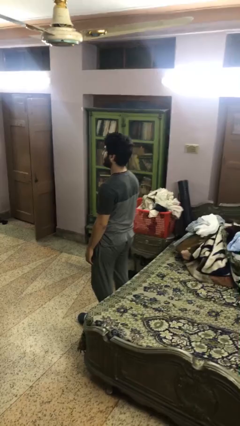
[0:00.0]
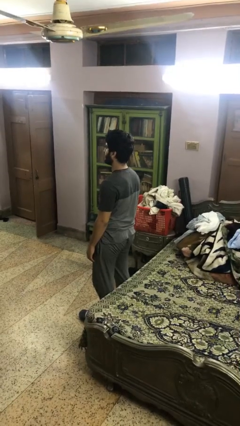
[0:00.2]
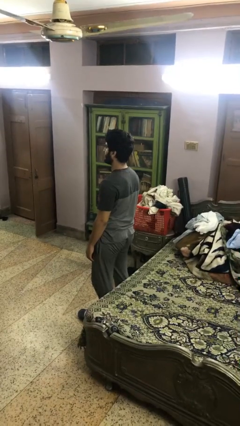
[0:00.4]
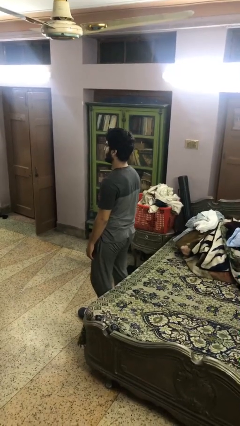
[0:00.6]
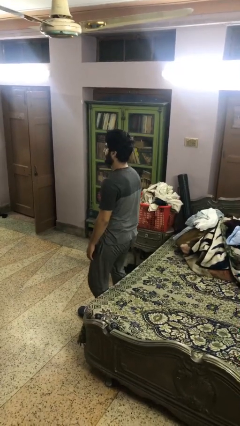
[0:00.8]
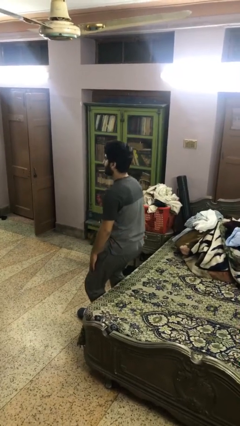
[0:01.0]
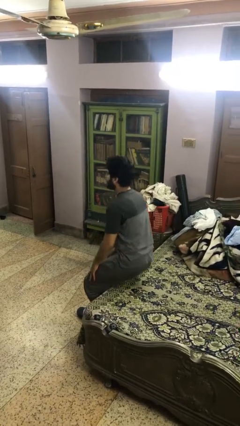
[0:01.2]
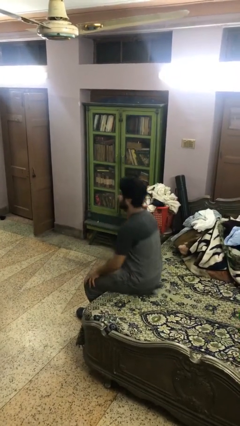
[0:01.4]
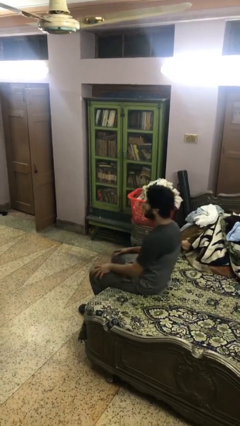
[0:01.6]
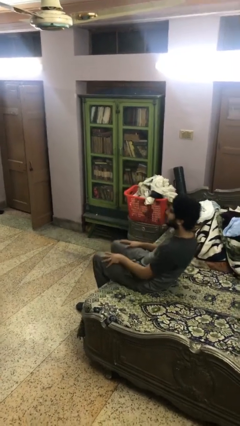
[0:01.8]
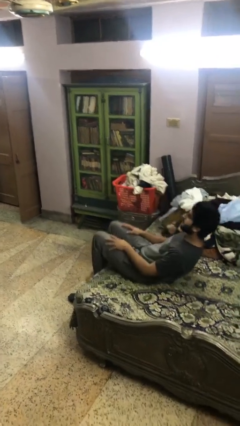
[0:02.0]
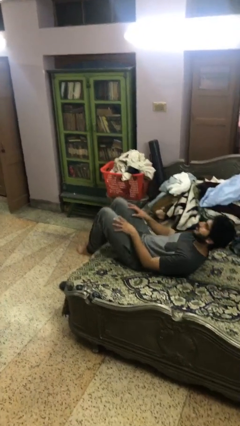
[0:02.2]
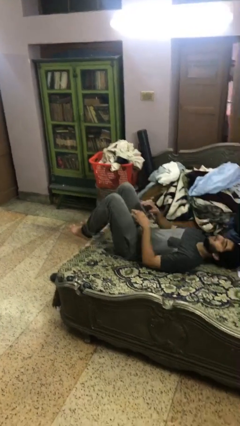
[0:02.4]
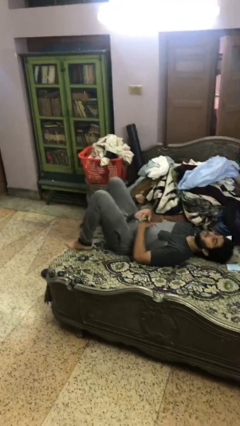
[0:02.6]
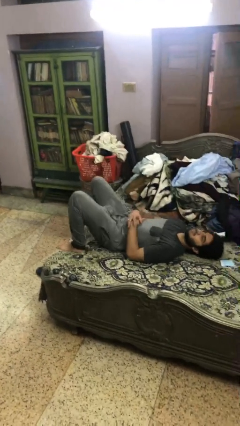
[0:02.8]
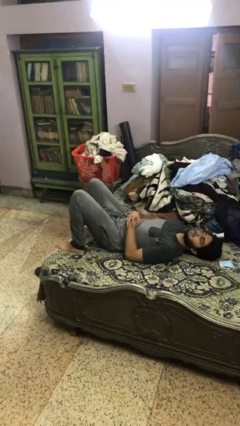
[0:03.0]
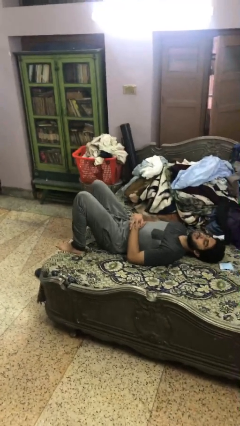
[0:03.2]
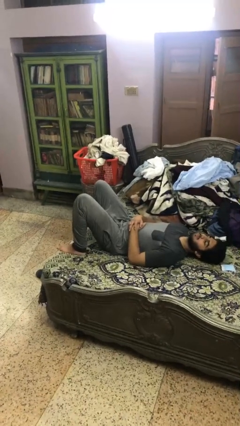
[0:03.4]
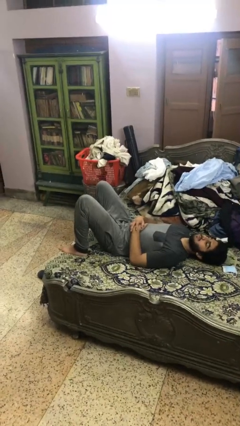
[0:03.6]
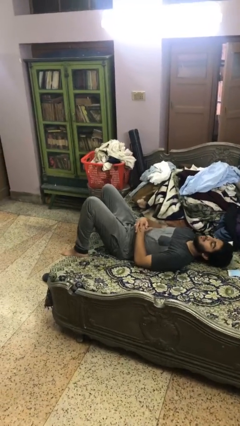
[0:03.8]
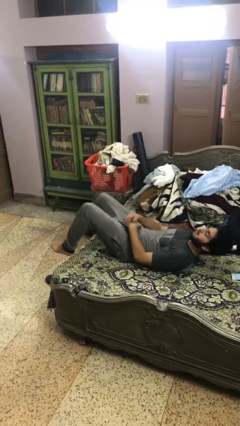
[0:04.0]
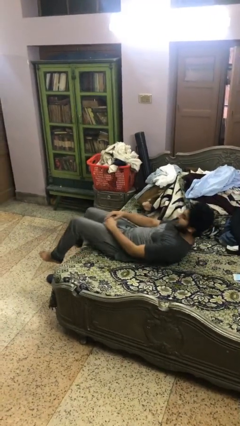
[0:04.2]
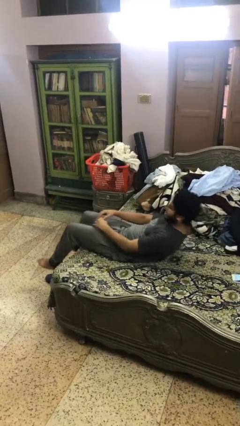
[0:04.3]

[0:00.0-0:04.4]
person lies down on bed

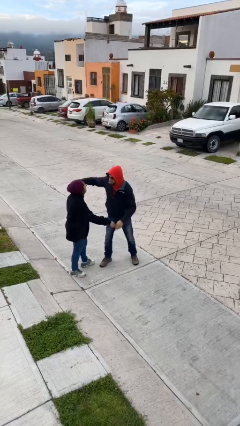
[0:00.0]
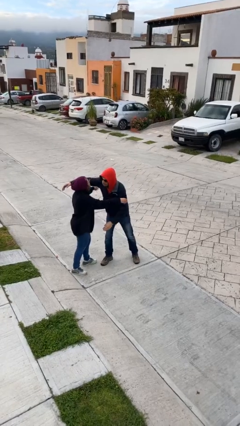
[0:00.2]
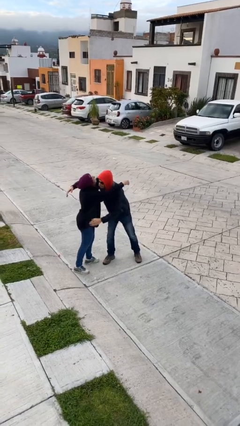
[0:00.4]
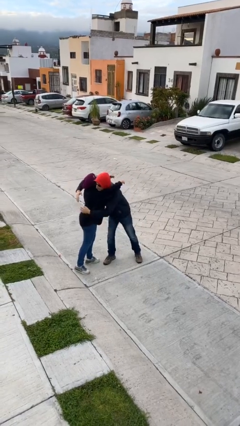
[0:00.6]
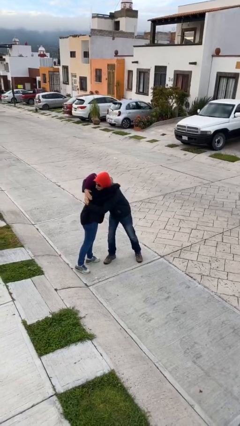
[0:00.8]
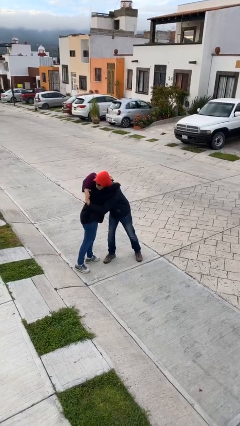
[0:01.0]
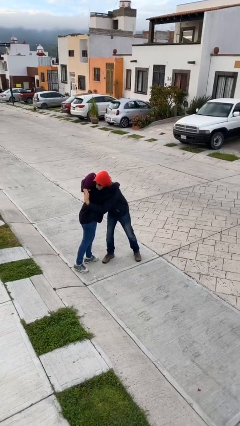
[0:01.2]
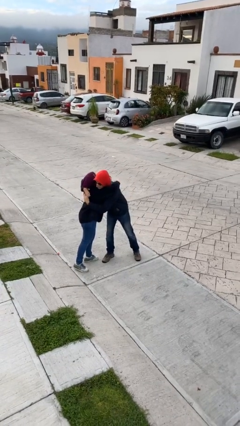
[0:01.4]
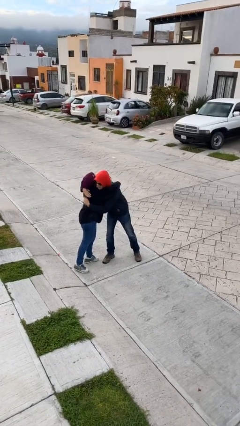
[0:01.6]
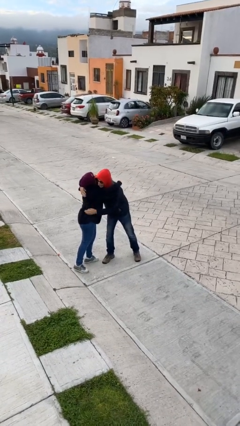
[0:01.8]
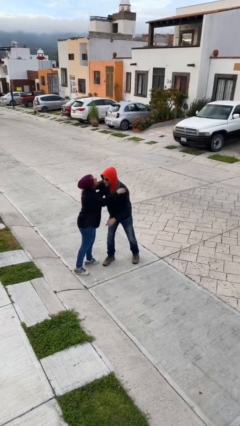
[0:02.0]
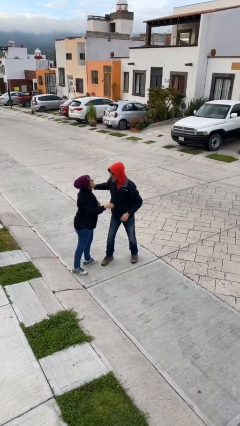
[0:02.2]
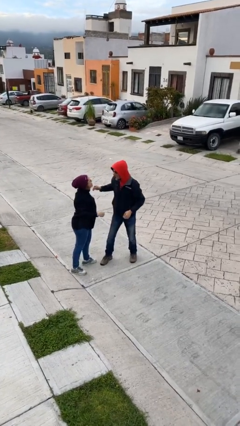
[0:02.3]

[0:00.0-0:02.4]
person embraces person

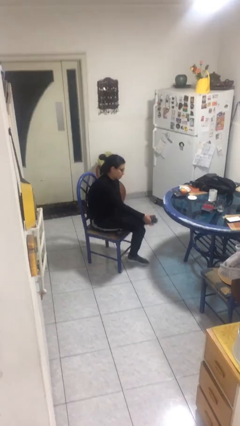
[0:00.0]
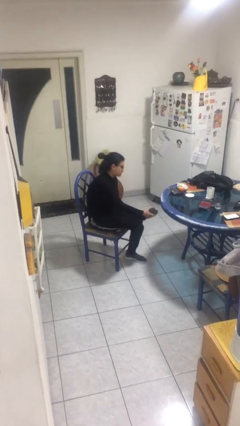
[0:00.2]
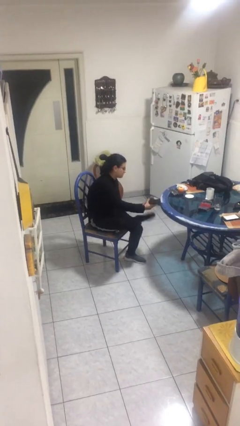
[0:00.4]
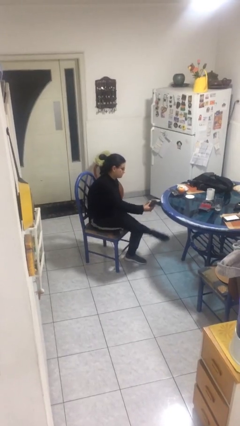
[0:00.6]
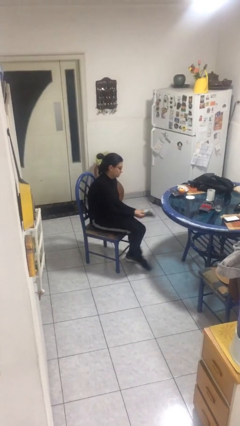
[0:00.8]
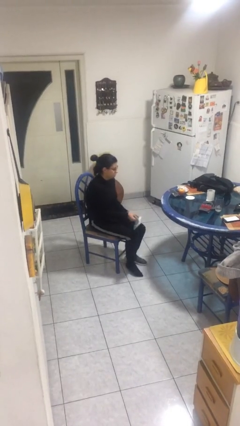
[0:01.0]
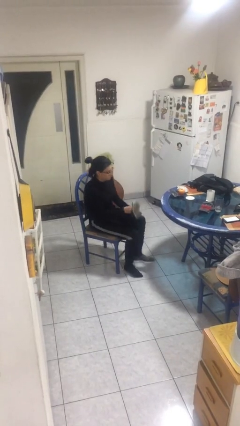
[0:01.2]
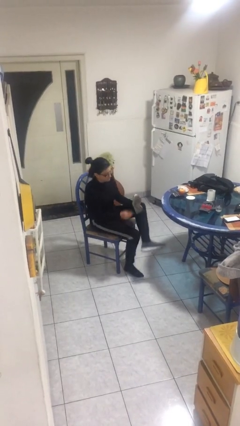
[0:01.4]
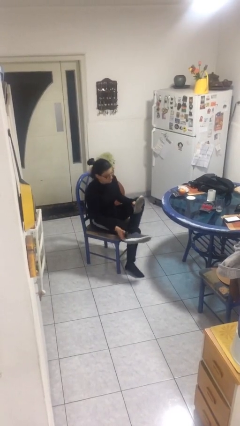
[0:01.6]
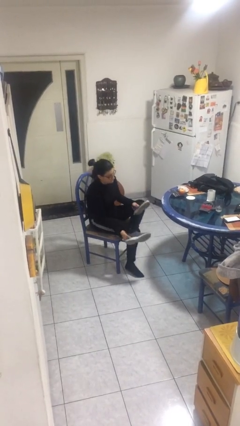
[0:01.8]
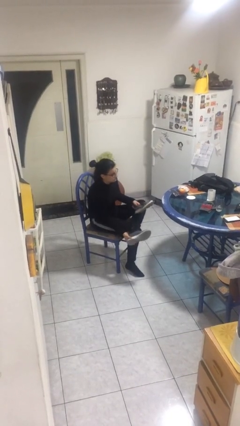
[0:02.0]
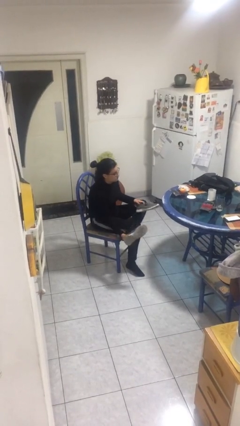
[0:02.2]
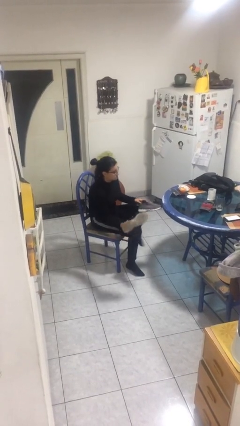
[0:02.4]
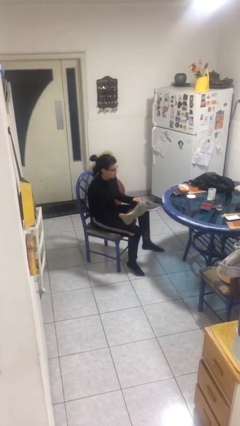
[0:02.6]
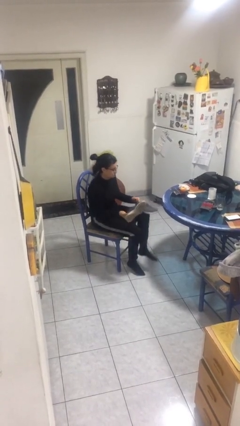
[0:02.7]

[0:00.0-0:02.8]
person takes off shoes

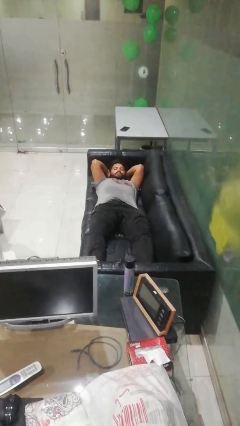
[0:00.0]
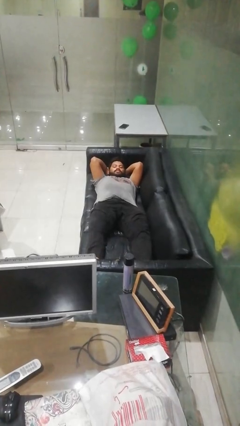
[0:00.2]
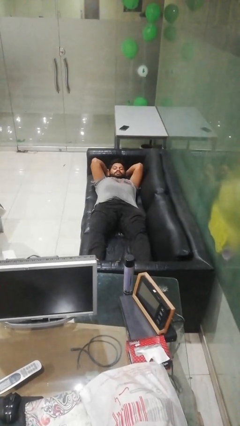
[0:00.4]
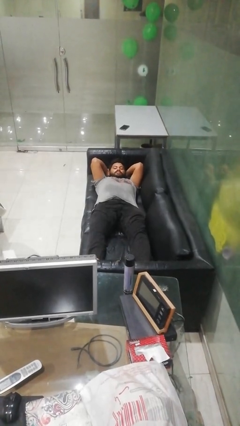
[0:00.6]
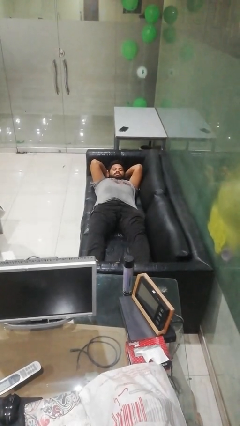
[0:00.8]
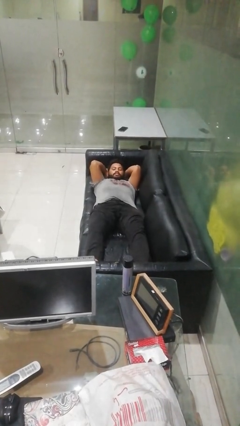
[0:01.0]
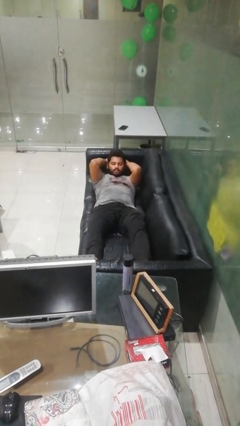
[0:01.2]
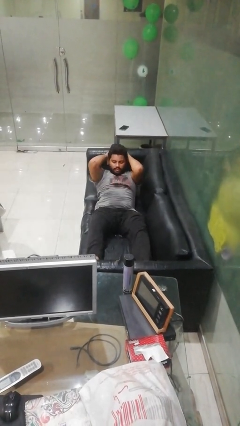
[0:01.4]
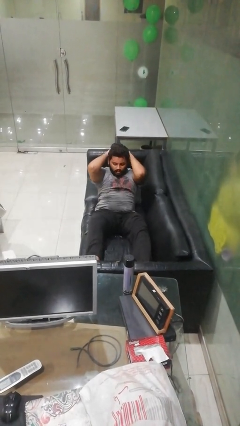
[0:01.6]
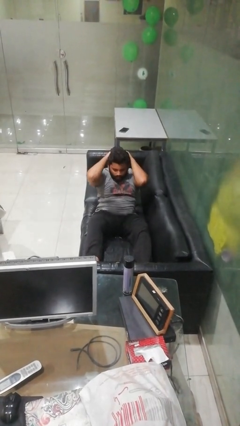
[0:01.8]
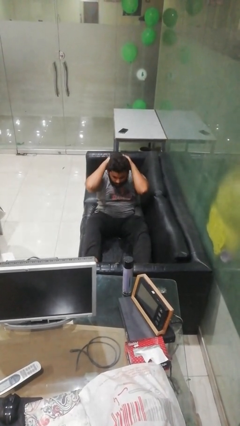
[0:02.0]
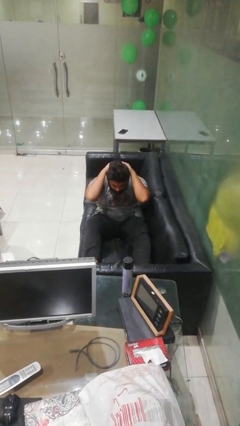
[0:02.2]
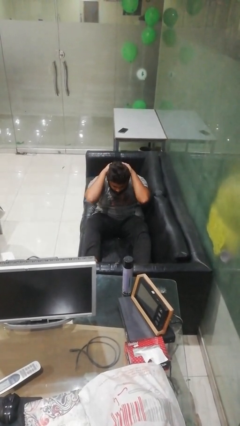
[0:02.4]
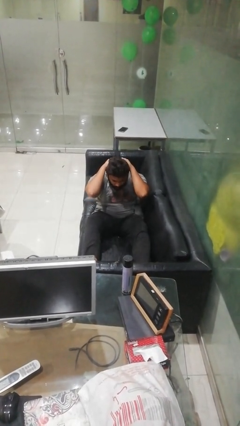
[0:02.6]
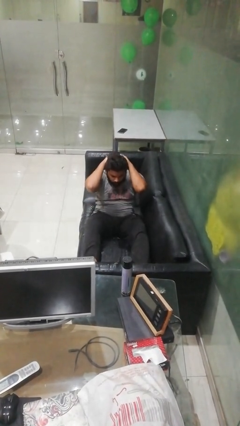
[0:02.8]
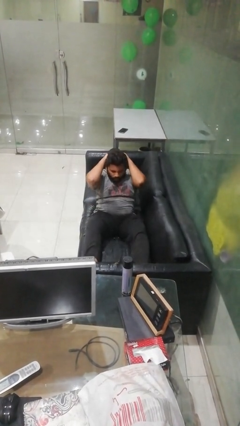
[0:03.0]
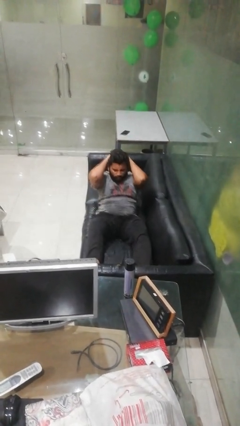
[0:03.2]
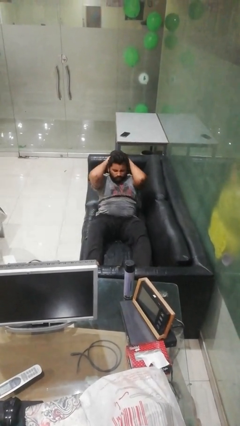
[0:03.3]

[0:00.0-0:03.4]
person exercises with situp

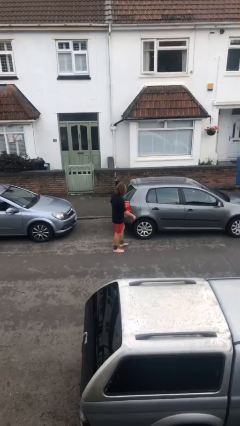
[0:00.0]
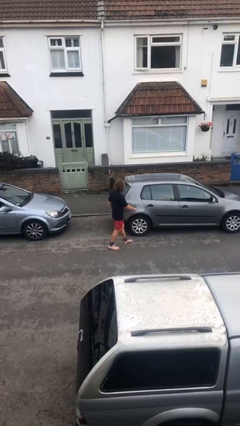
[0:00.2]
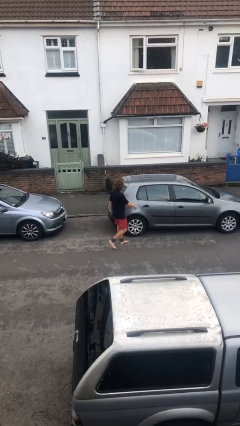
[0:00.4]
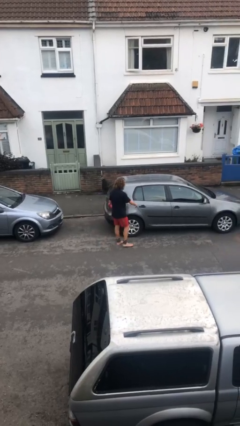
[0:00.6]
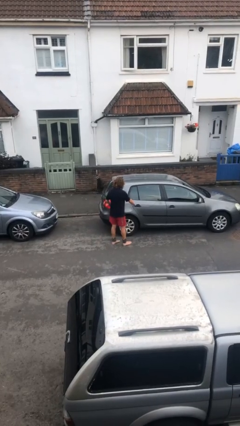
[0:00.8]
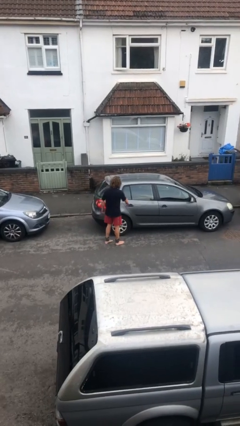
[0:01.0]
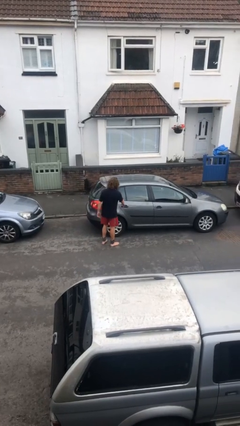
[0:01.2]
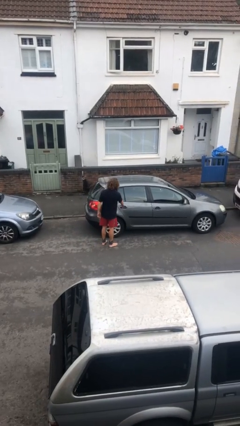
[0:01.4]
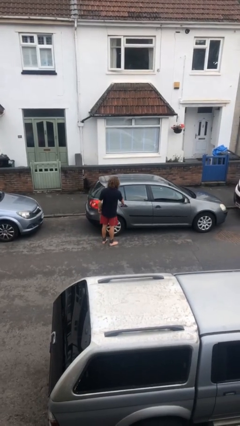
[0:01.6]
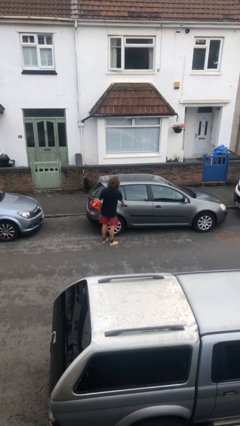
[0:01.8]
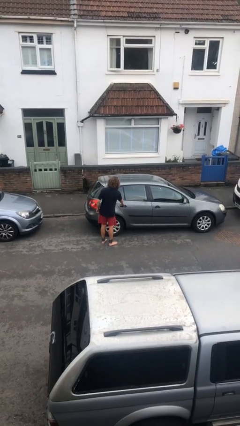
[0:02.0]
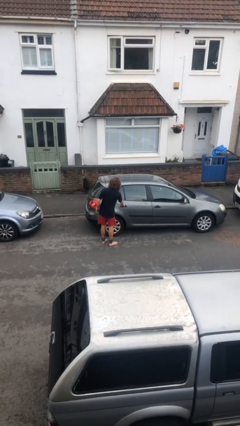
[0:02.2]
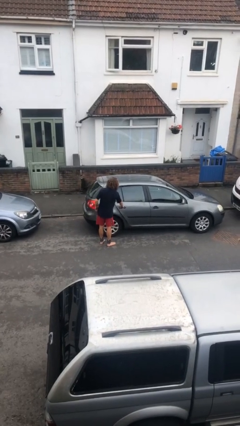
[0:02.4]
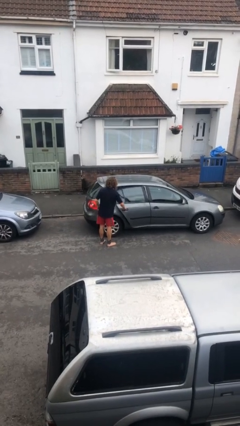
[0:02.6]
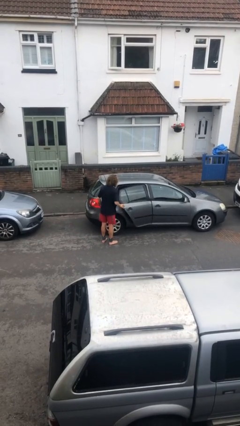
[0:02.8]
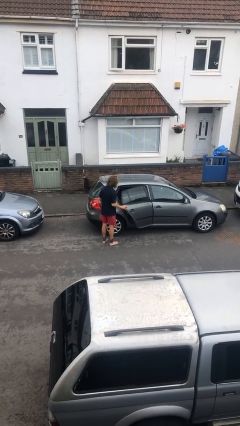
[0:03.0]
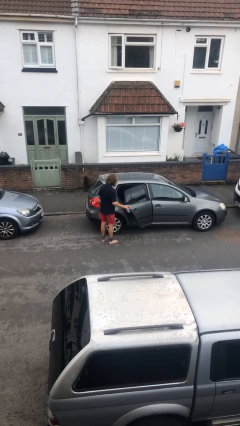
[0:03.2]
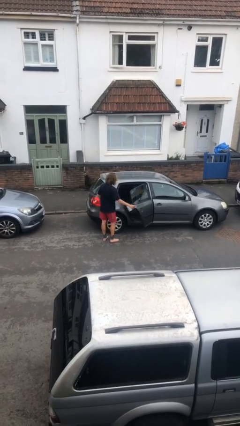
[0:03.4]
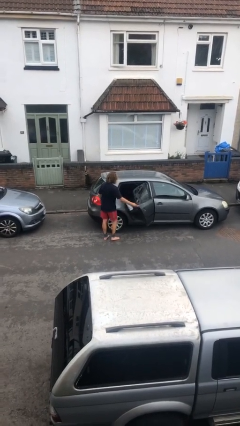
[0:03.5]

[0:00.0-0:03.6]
person opens car door

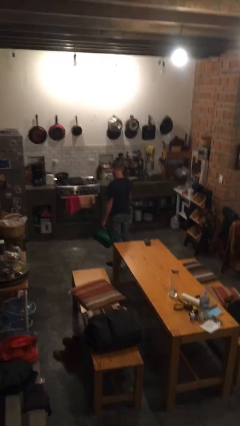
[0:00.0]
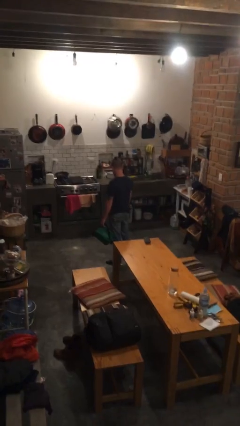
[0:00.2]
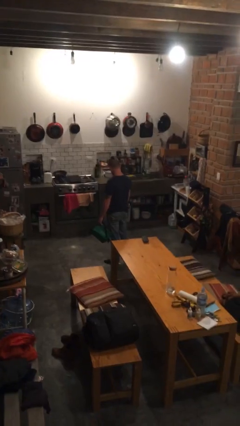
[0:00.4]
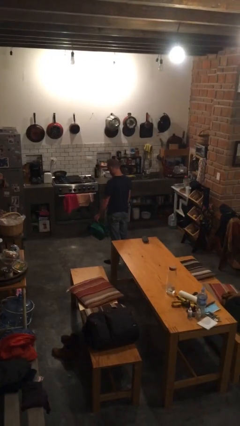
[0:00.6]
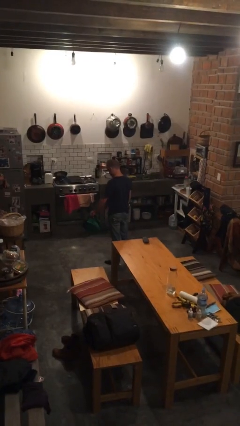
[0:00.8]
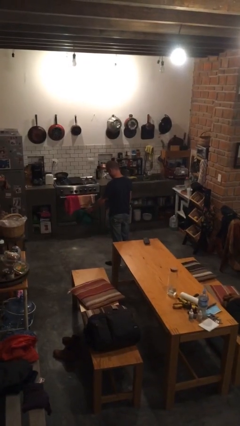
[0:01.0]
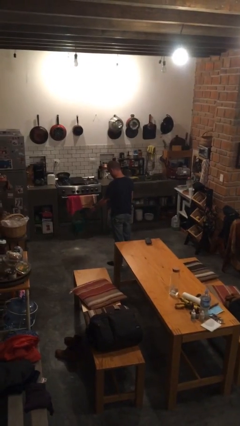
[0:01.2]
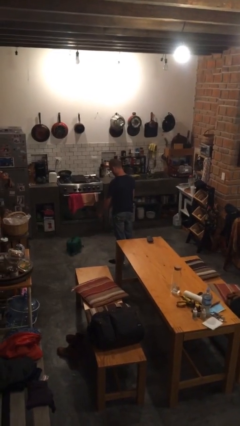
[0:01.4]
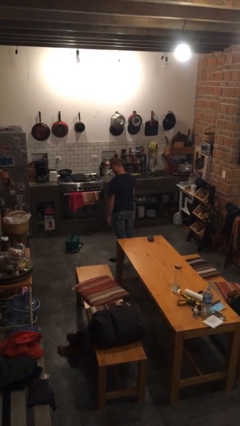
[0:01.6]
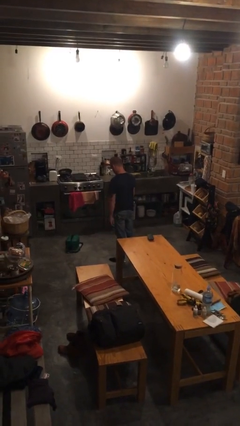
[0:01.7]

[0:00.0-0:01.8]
person throws object to ground
